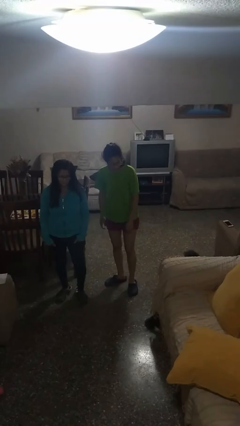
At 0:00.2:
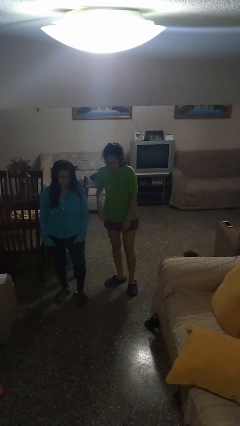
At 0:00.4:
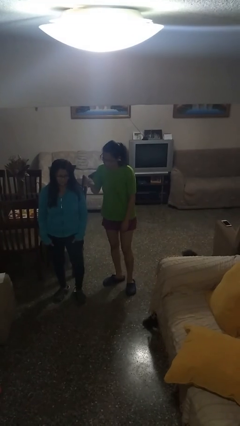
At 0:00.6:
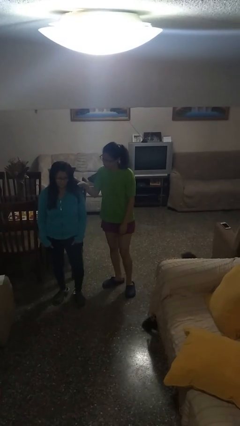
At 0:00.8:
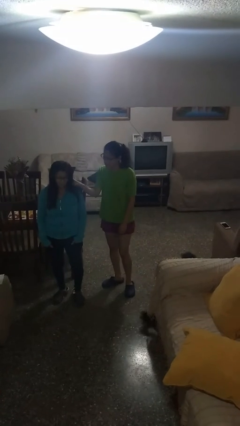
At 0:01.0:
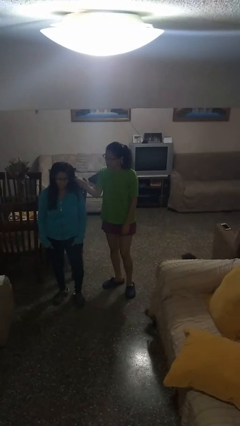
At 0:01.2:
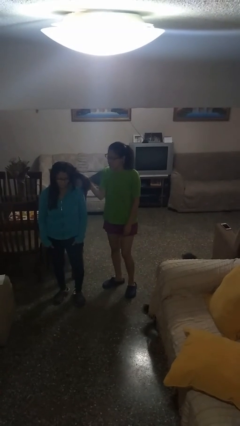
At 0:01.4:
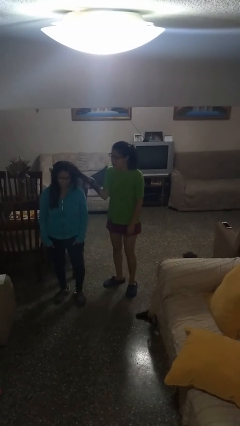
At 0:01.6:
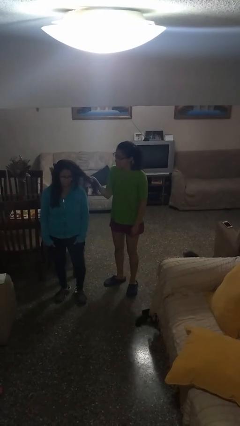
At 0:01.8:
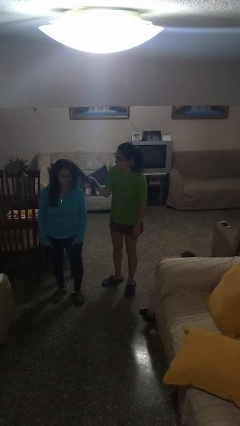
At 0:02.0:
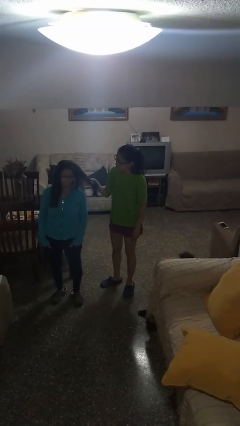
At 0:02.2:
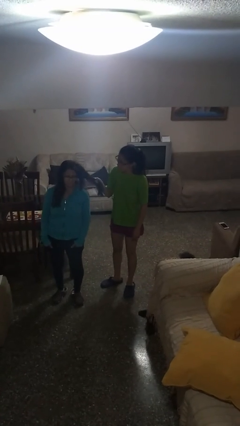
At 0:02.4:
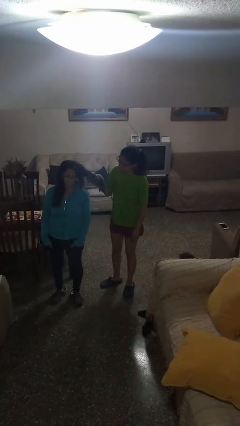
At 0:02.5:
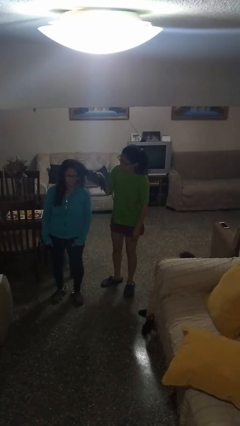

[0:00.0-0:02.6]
person grabs person by hair

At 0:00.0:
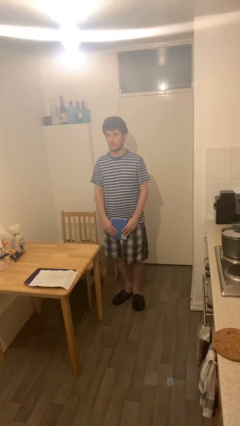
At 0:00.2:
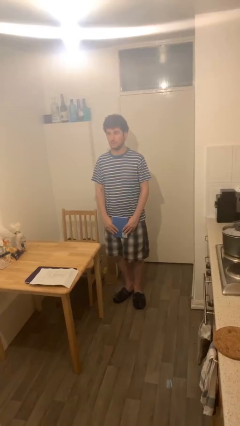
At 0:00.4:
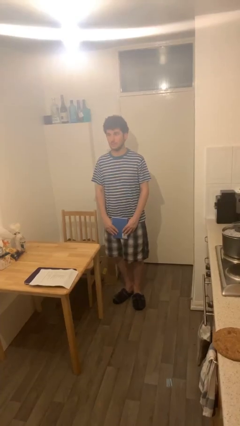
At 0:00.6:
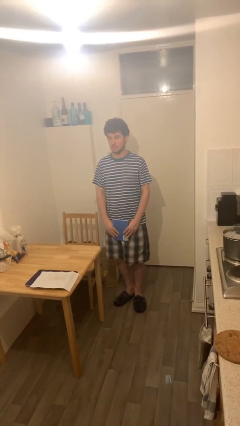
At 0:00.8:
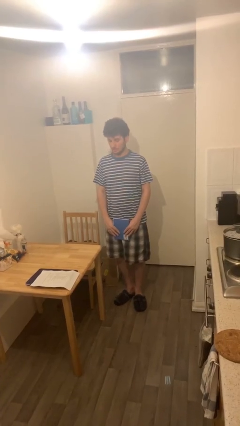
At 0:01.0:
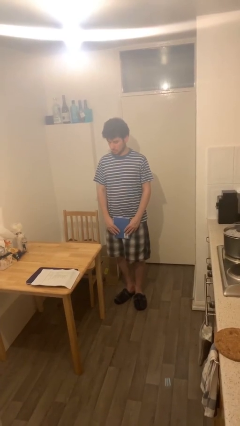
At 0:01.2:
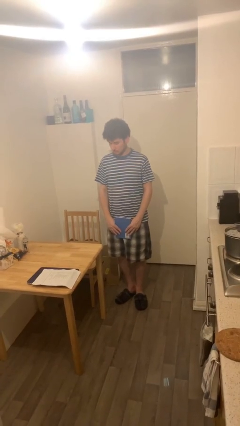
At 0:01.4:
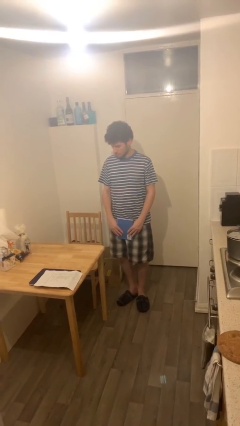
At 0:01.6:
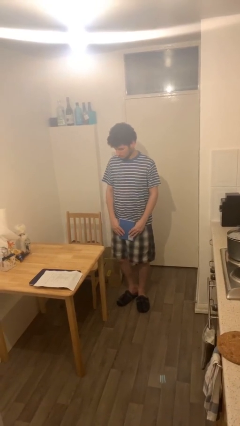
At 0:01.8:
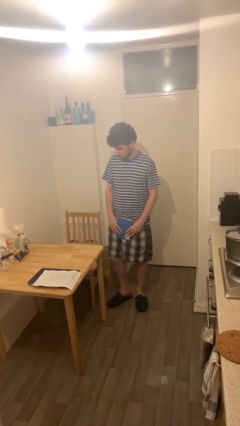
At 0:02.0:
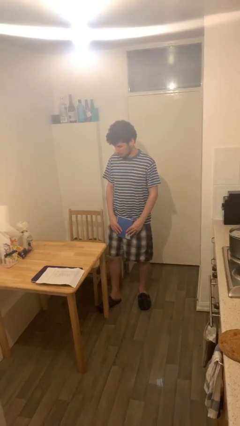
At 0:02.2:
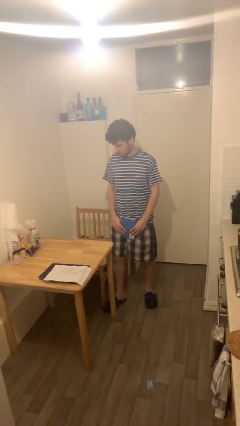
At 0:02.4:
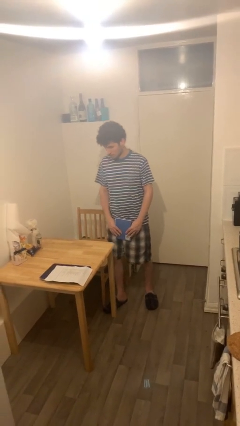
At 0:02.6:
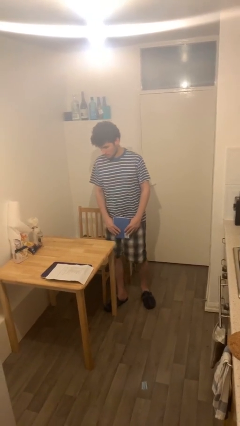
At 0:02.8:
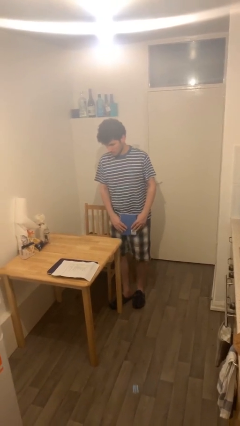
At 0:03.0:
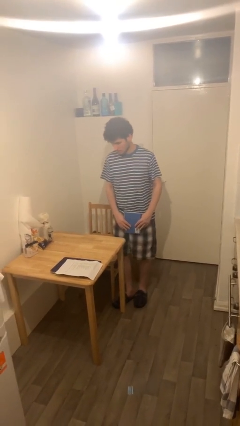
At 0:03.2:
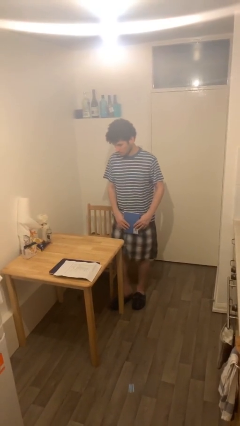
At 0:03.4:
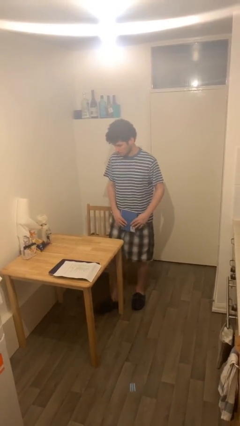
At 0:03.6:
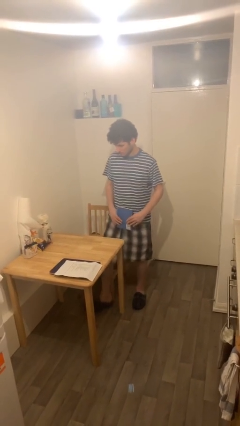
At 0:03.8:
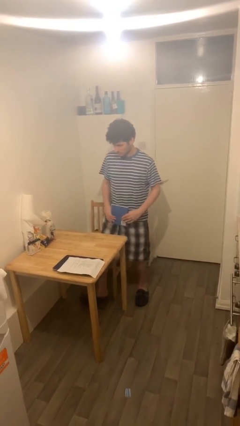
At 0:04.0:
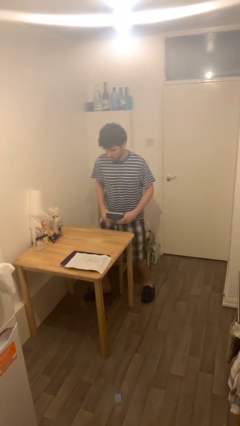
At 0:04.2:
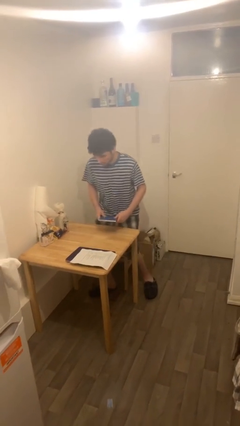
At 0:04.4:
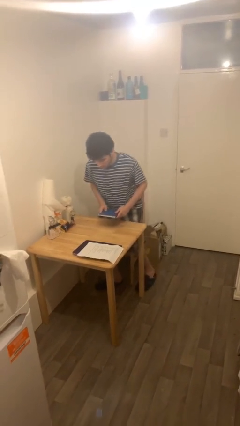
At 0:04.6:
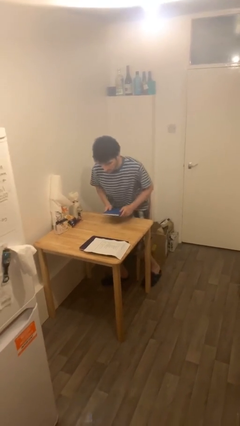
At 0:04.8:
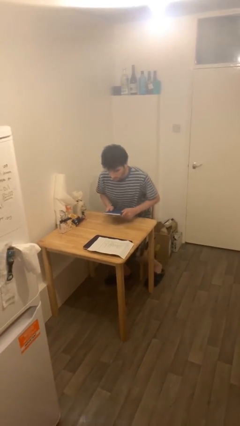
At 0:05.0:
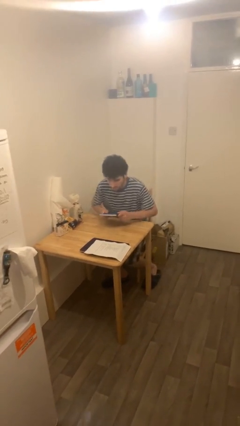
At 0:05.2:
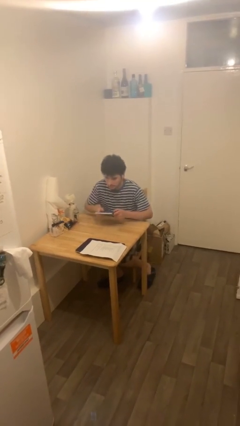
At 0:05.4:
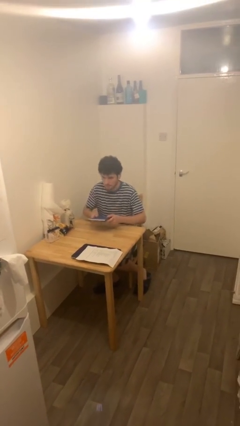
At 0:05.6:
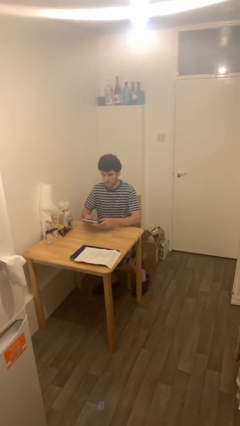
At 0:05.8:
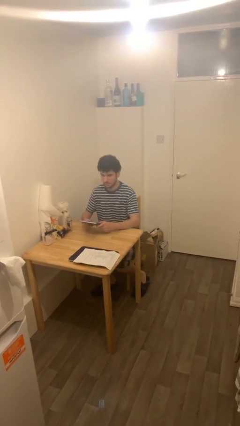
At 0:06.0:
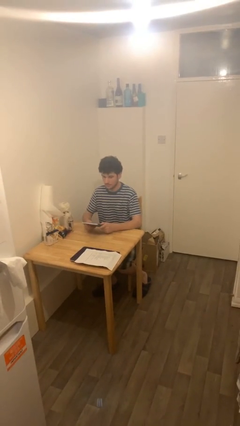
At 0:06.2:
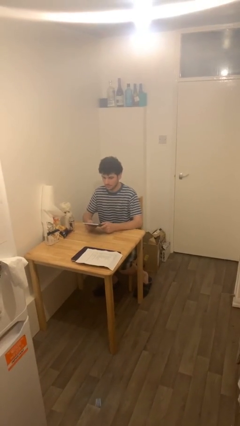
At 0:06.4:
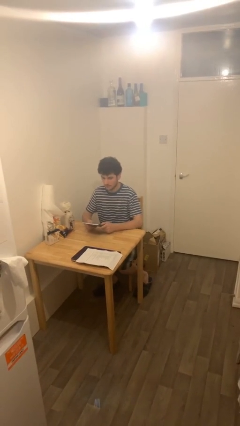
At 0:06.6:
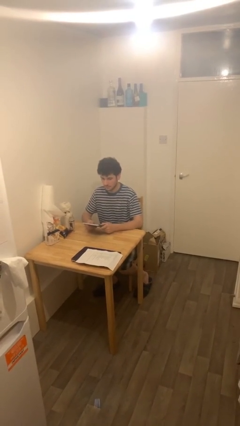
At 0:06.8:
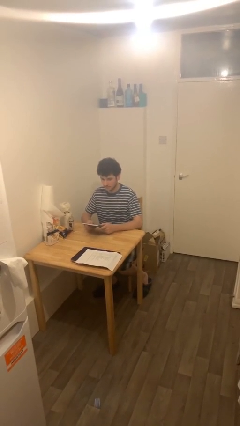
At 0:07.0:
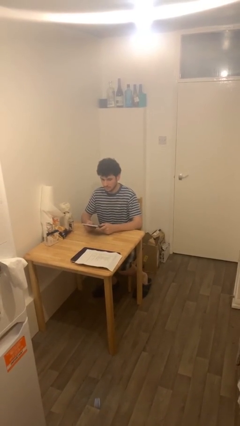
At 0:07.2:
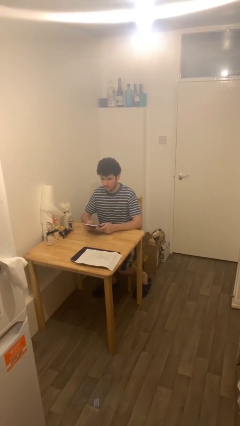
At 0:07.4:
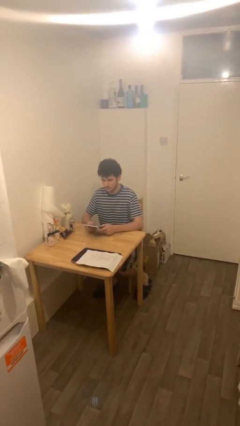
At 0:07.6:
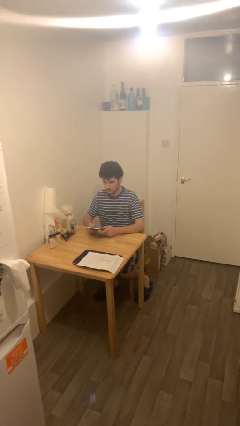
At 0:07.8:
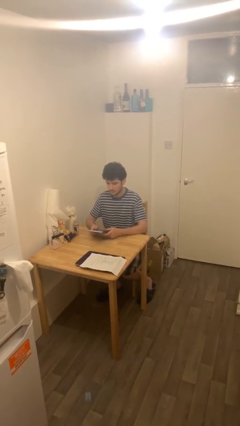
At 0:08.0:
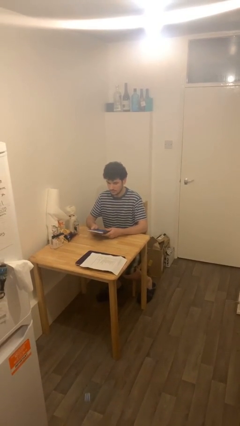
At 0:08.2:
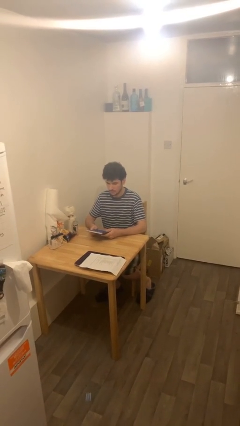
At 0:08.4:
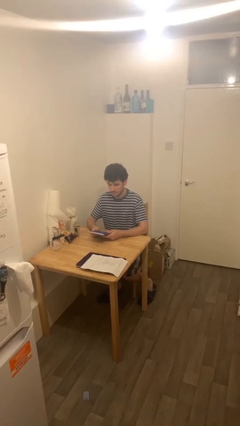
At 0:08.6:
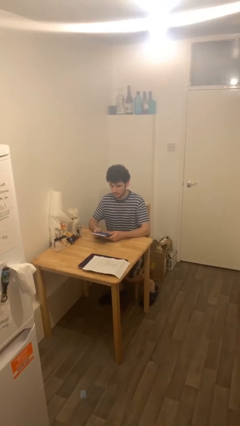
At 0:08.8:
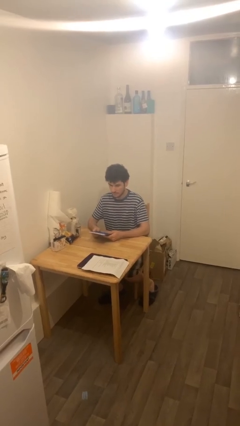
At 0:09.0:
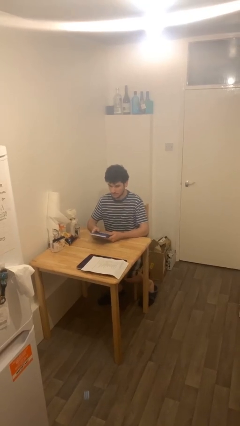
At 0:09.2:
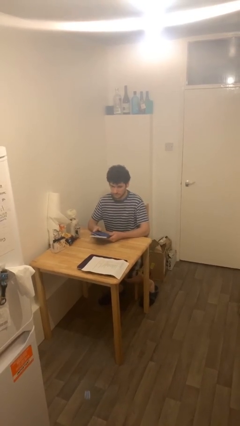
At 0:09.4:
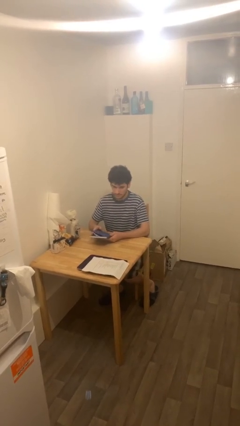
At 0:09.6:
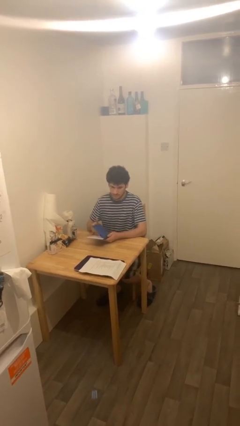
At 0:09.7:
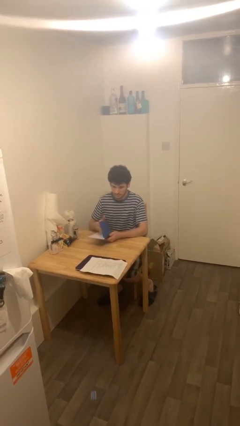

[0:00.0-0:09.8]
person sits down

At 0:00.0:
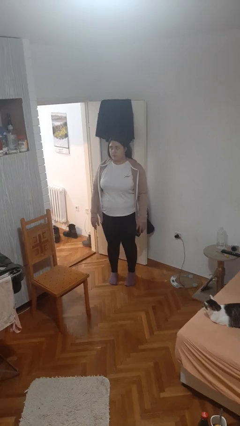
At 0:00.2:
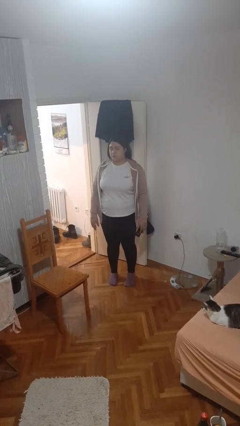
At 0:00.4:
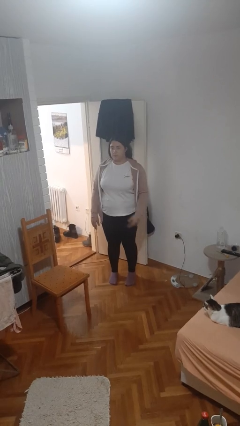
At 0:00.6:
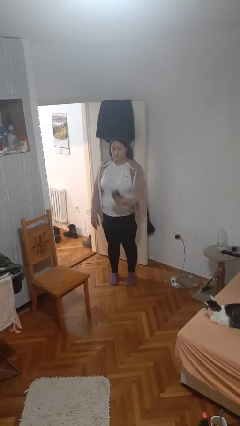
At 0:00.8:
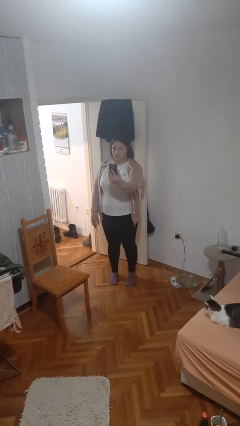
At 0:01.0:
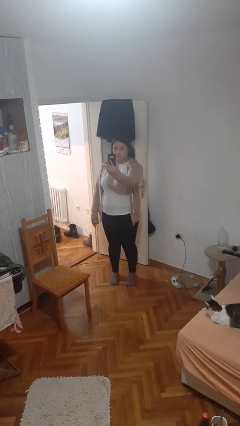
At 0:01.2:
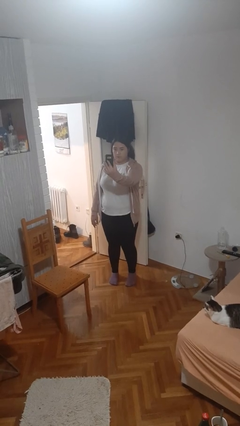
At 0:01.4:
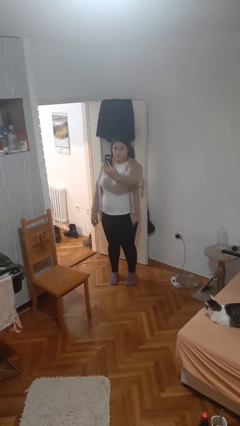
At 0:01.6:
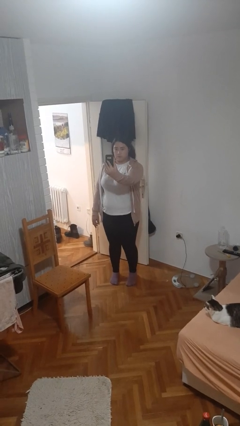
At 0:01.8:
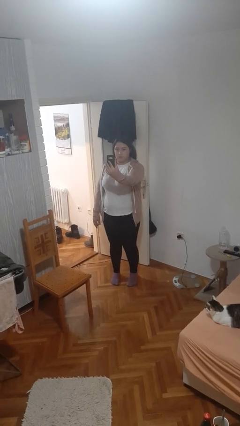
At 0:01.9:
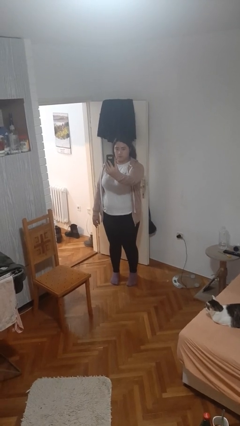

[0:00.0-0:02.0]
person takes selfie

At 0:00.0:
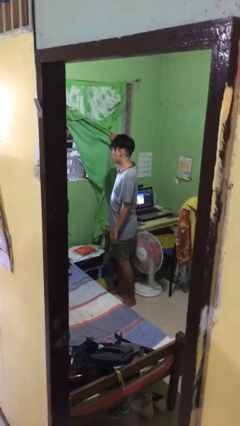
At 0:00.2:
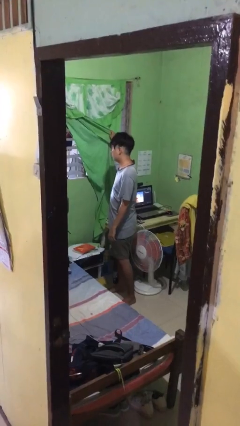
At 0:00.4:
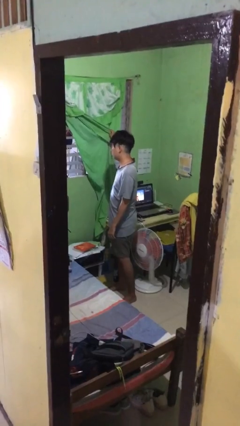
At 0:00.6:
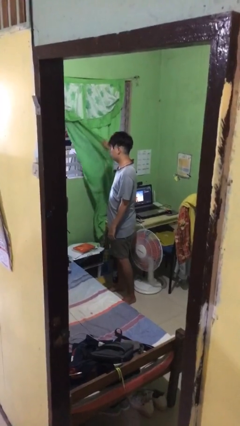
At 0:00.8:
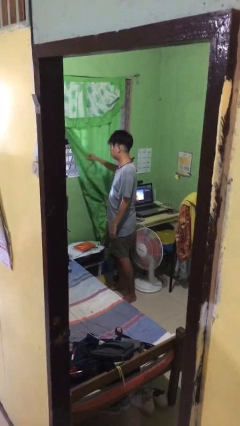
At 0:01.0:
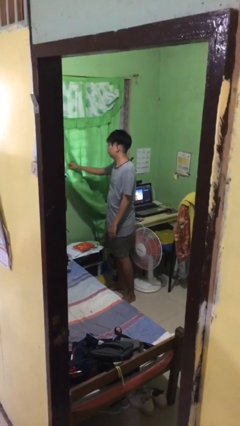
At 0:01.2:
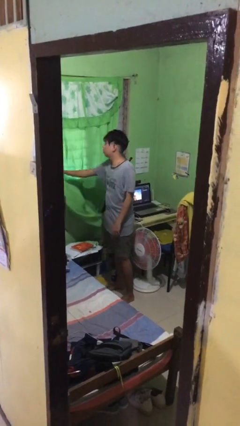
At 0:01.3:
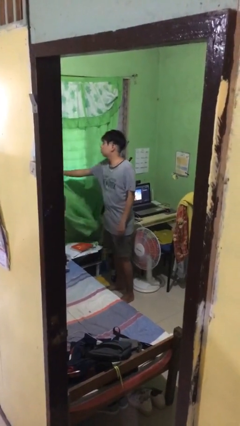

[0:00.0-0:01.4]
person closes curtains

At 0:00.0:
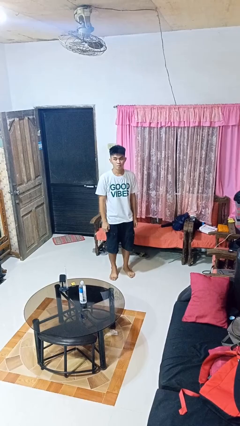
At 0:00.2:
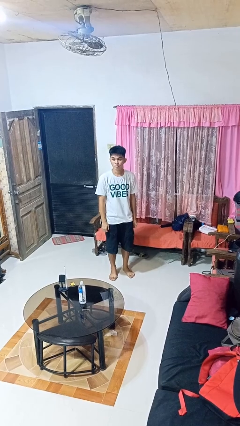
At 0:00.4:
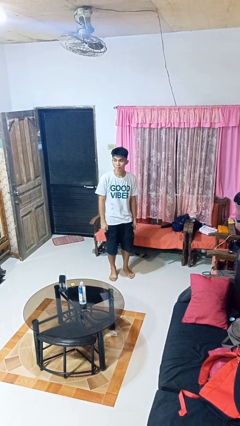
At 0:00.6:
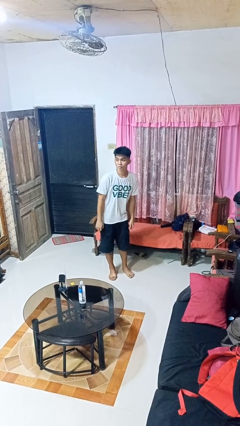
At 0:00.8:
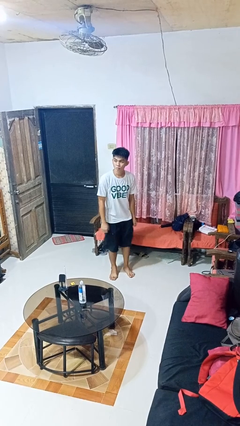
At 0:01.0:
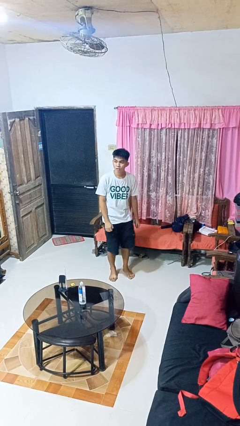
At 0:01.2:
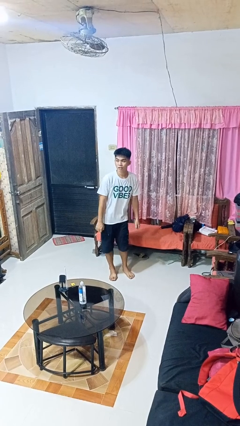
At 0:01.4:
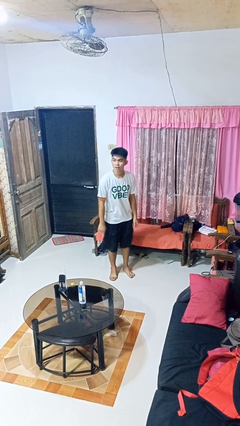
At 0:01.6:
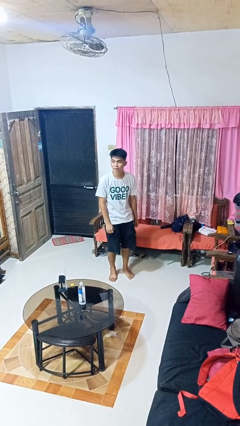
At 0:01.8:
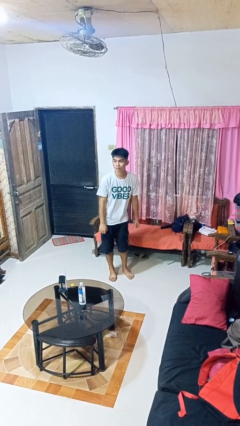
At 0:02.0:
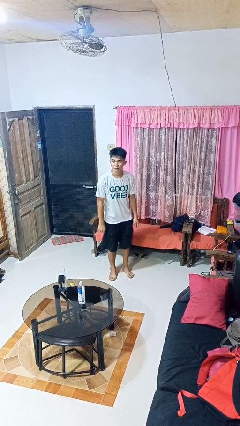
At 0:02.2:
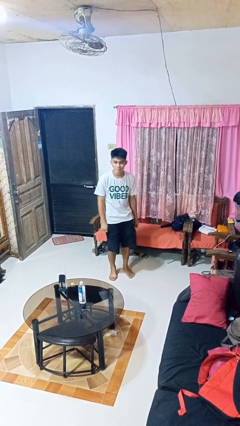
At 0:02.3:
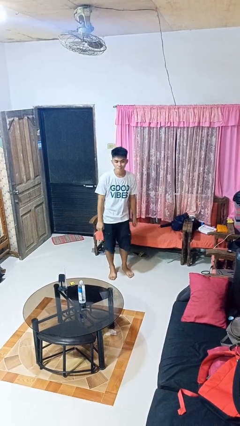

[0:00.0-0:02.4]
person wiggles hips
